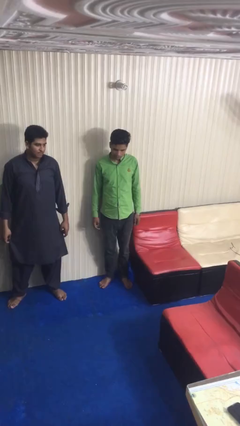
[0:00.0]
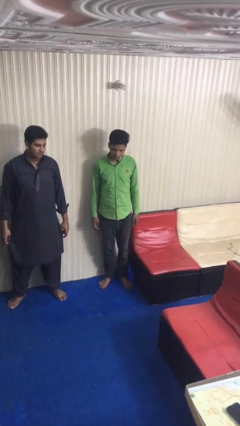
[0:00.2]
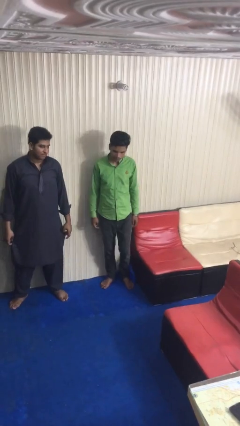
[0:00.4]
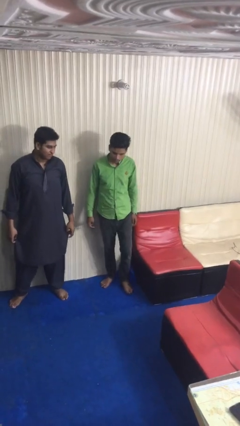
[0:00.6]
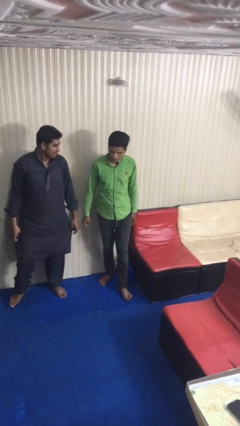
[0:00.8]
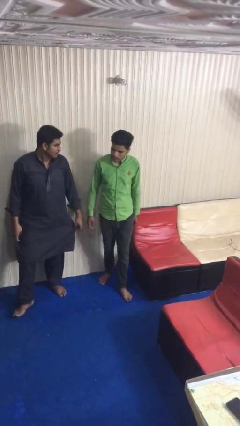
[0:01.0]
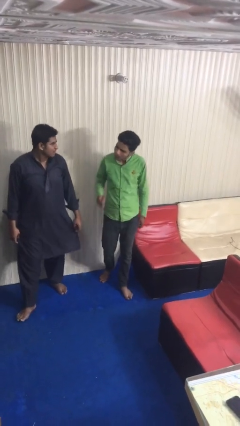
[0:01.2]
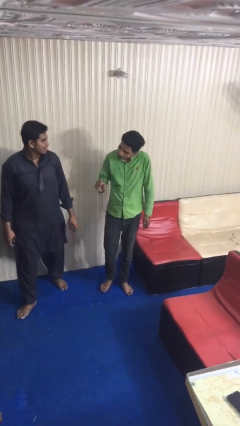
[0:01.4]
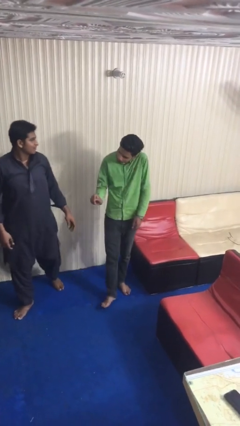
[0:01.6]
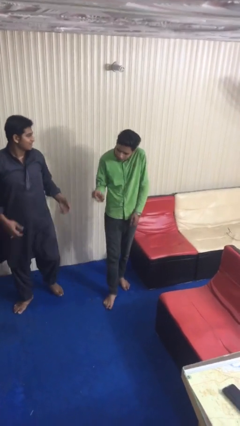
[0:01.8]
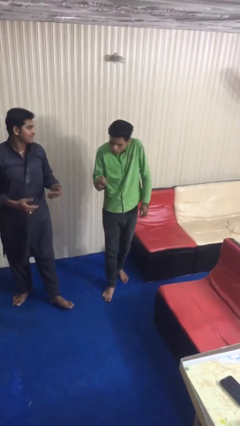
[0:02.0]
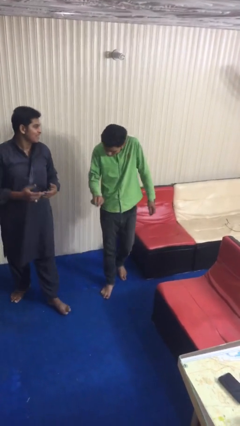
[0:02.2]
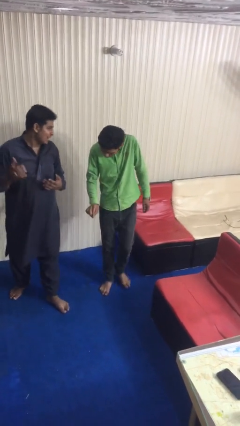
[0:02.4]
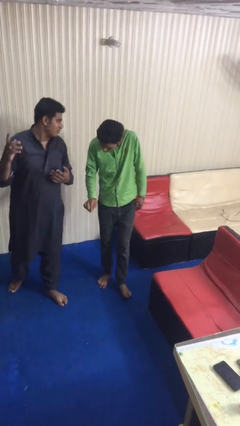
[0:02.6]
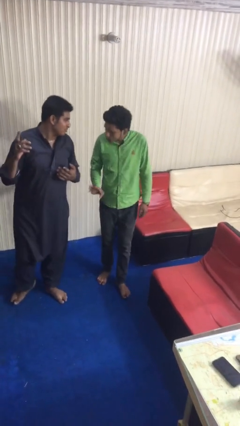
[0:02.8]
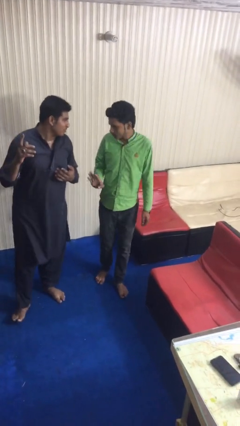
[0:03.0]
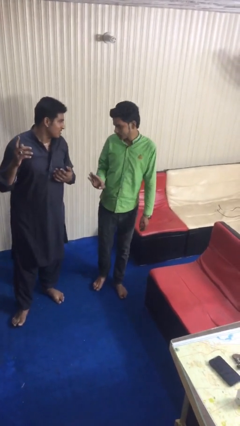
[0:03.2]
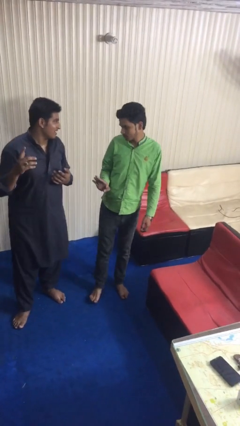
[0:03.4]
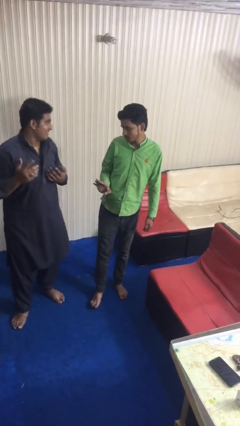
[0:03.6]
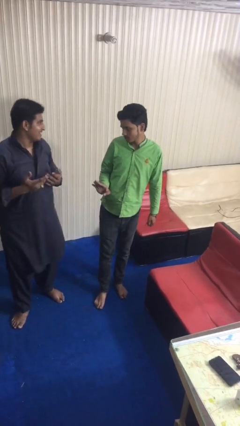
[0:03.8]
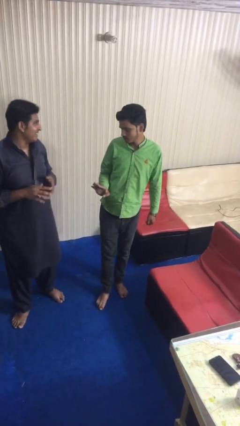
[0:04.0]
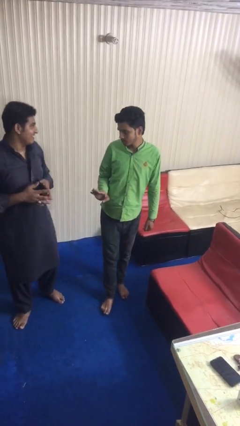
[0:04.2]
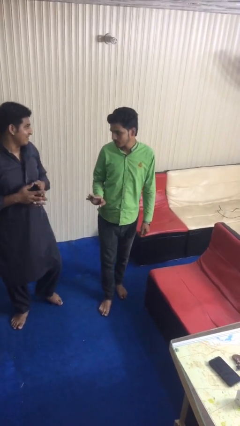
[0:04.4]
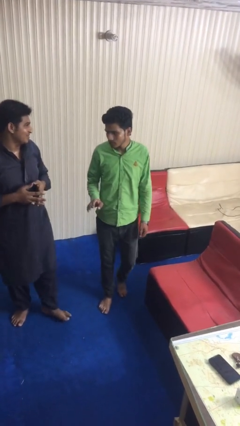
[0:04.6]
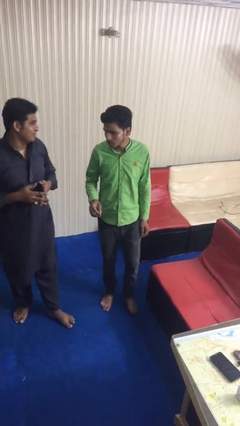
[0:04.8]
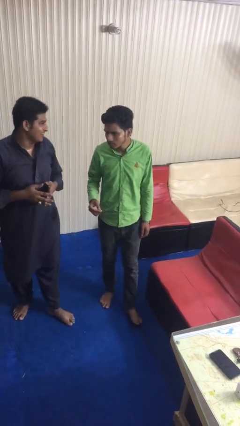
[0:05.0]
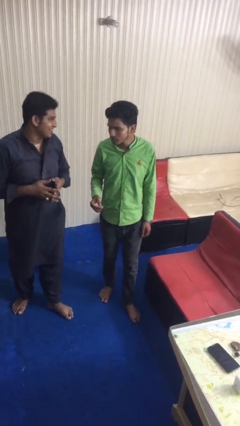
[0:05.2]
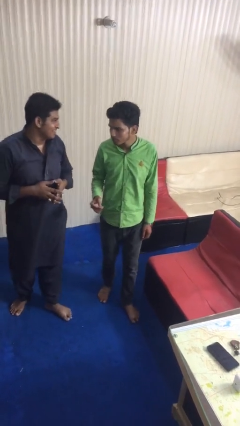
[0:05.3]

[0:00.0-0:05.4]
person talks to person

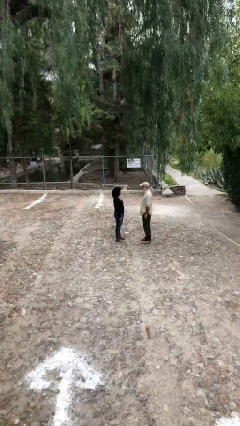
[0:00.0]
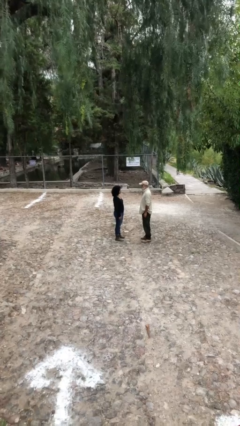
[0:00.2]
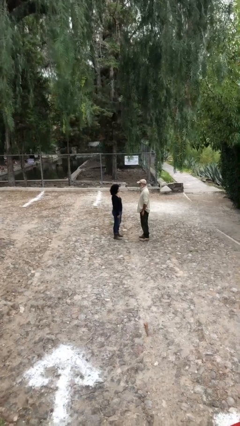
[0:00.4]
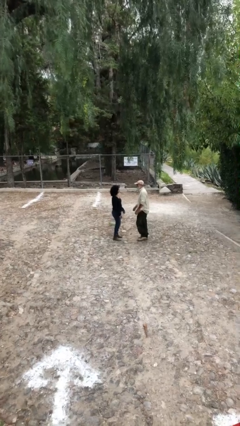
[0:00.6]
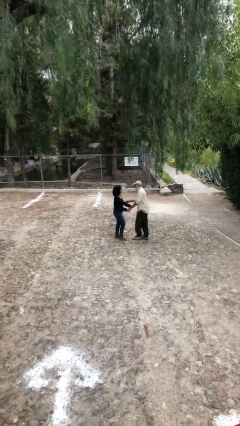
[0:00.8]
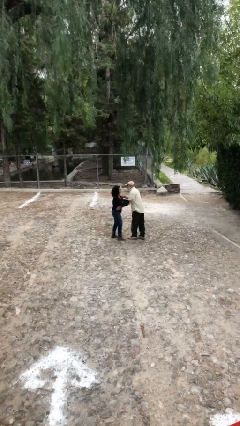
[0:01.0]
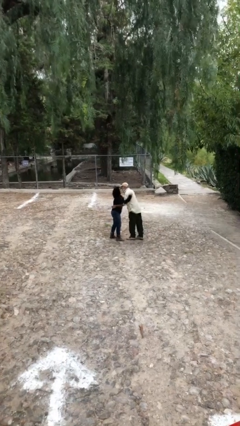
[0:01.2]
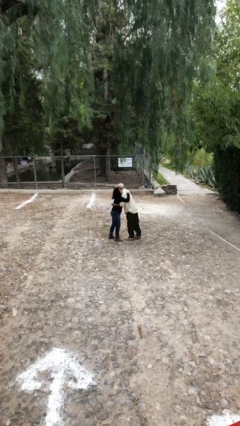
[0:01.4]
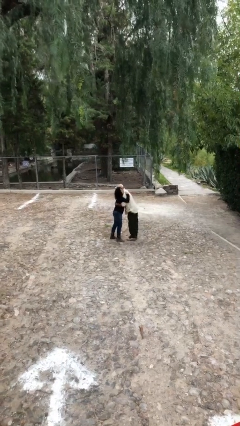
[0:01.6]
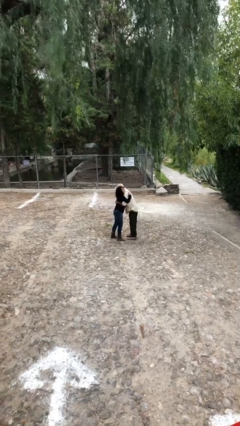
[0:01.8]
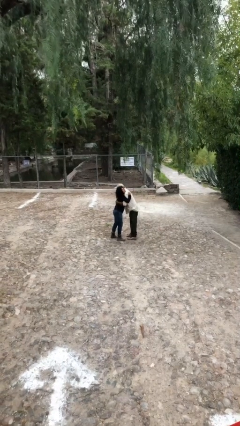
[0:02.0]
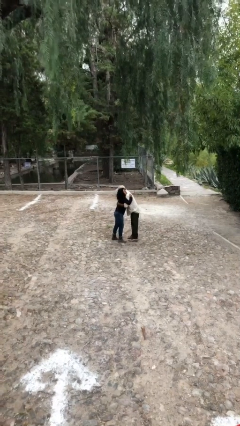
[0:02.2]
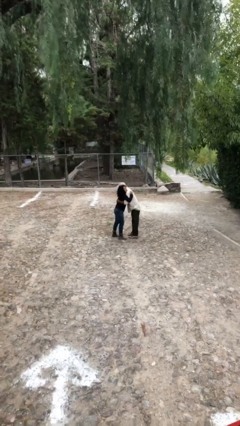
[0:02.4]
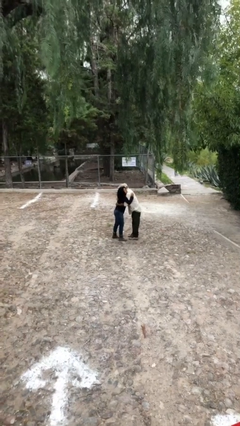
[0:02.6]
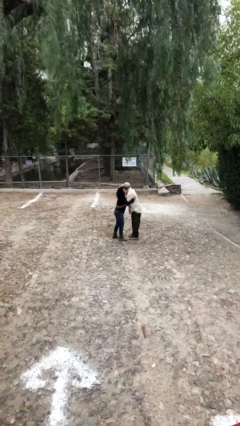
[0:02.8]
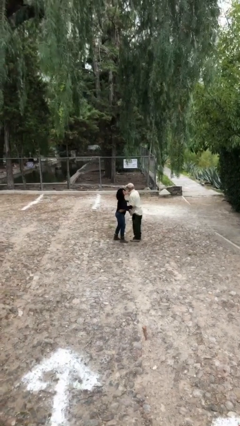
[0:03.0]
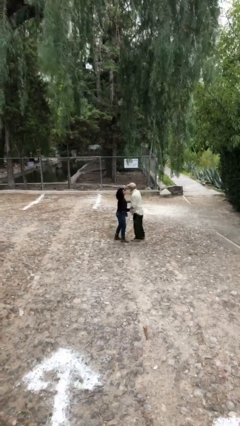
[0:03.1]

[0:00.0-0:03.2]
person embraces person

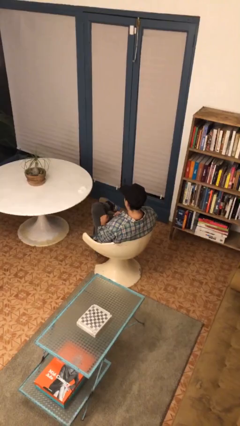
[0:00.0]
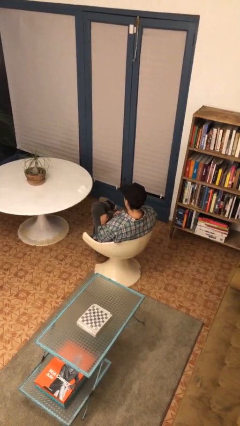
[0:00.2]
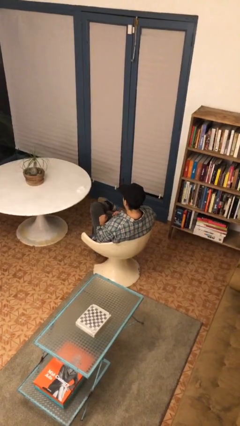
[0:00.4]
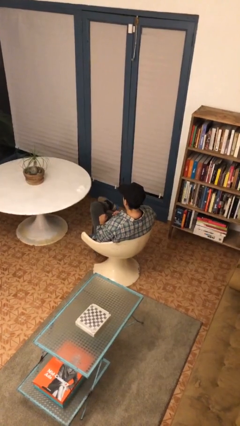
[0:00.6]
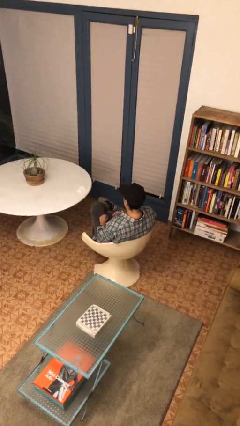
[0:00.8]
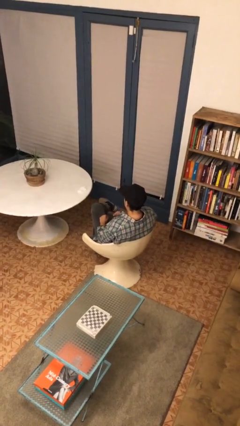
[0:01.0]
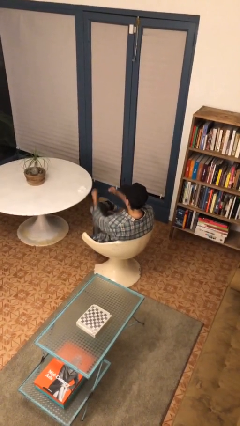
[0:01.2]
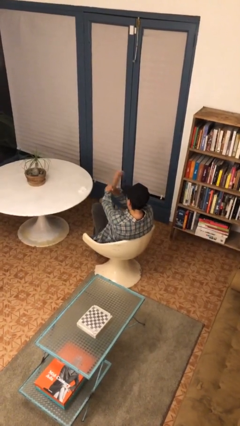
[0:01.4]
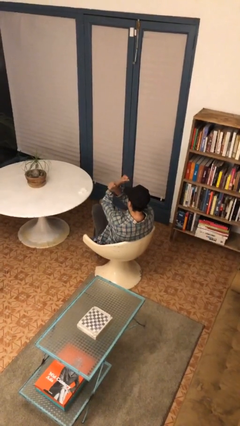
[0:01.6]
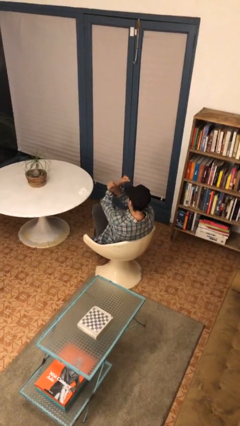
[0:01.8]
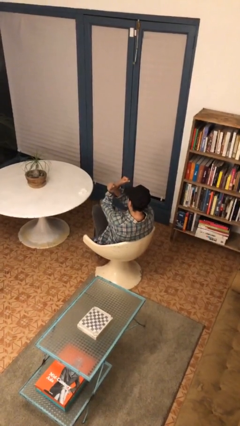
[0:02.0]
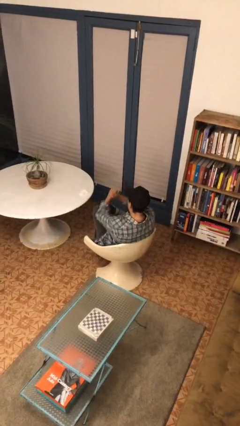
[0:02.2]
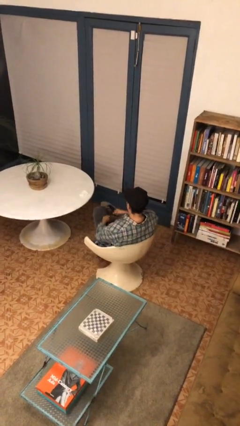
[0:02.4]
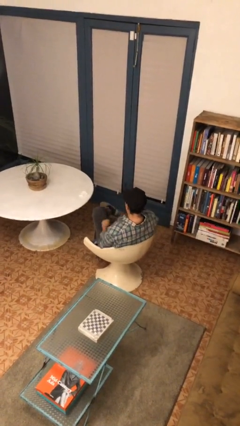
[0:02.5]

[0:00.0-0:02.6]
person gestures arms x

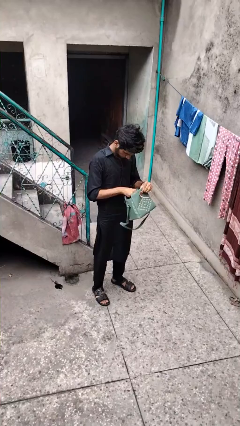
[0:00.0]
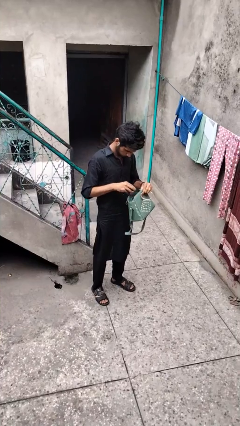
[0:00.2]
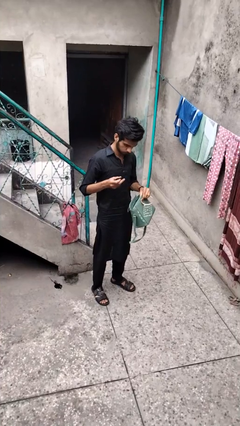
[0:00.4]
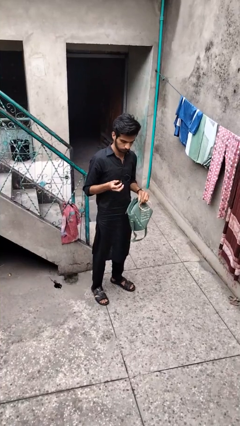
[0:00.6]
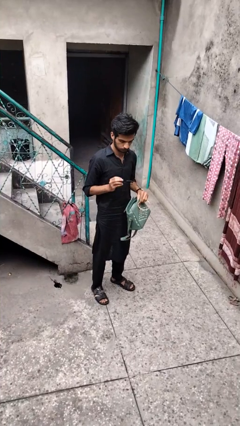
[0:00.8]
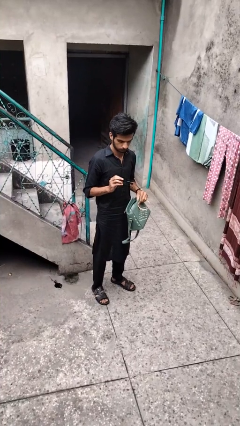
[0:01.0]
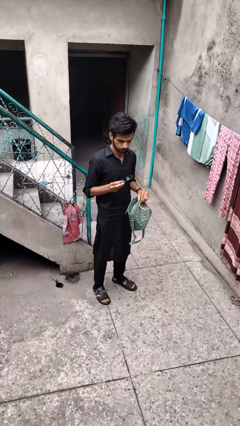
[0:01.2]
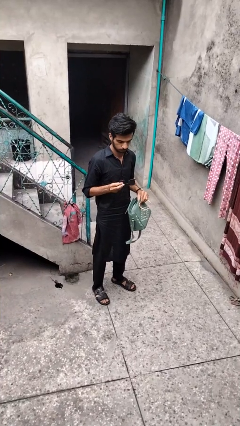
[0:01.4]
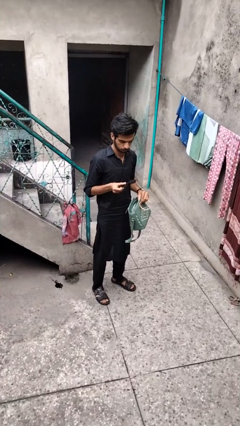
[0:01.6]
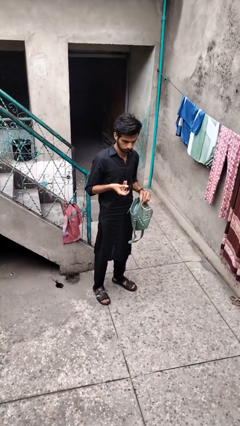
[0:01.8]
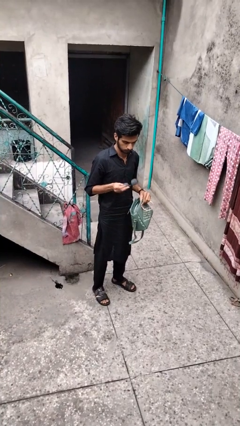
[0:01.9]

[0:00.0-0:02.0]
person takes object from purse

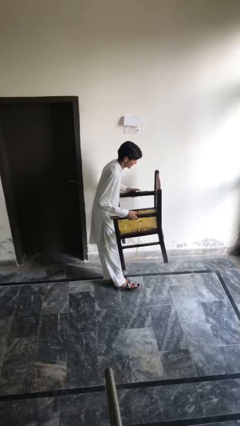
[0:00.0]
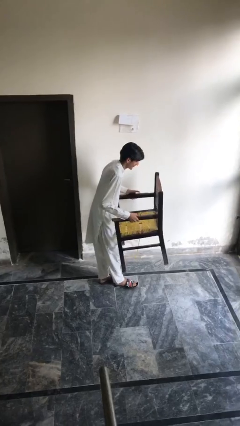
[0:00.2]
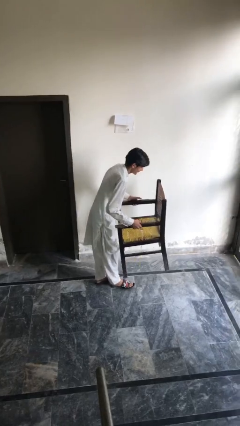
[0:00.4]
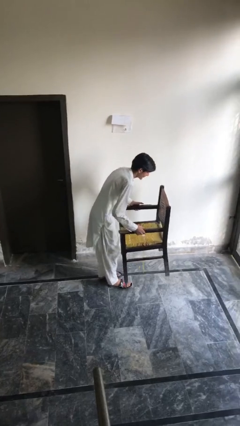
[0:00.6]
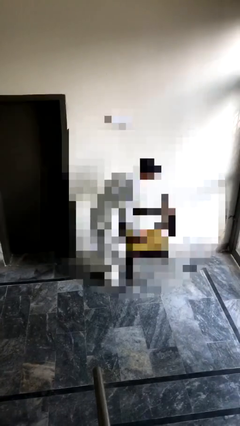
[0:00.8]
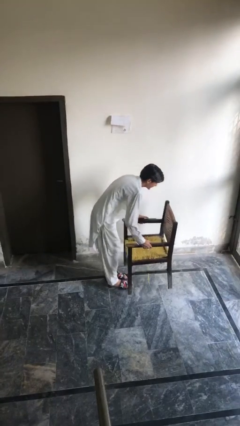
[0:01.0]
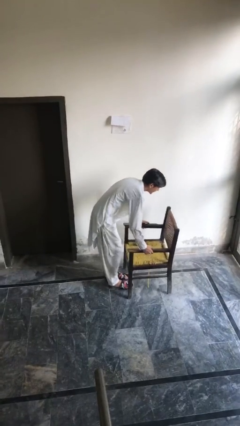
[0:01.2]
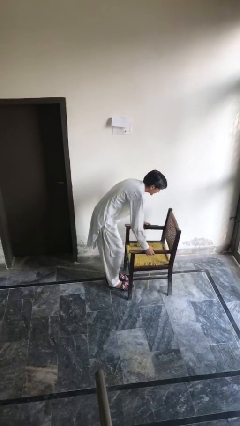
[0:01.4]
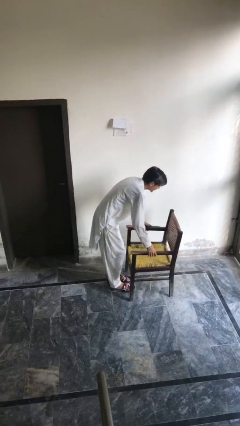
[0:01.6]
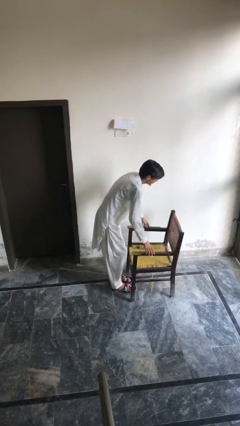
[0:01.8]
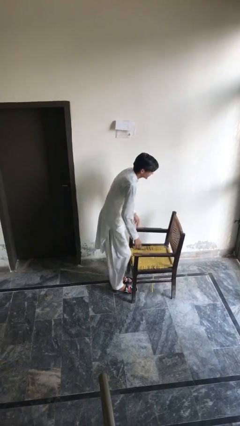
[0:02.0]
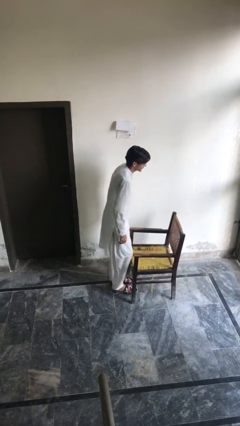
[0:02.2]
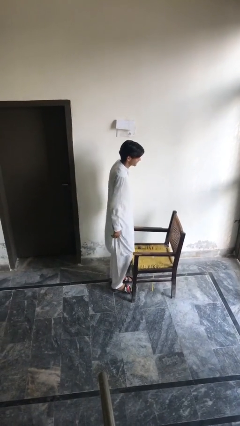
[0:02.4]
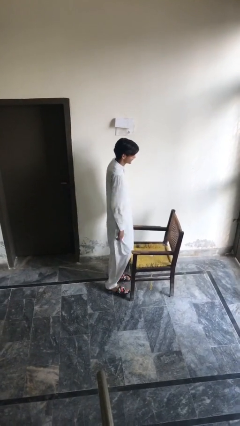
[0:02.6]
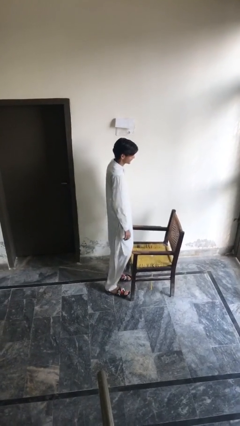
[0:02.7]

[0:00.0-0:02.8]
person puts down object on floor

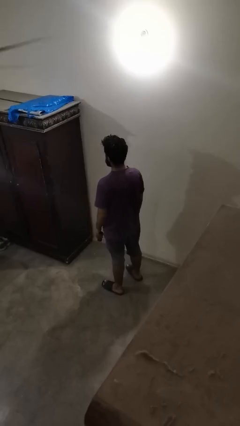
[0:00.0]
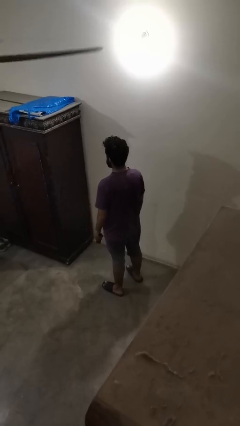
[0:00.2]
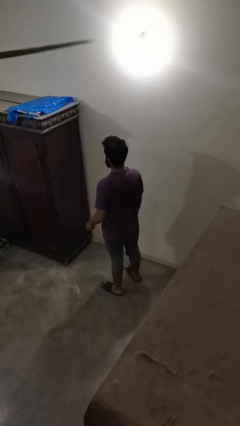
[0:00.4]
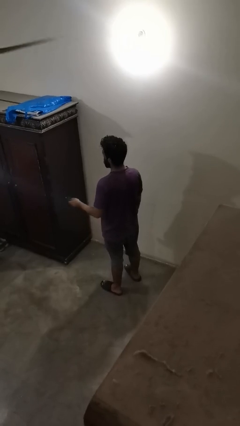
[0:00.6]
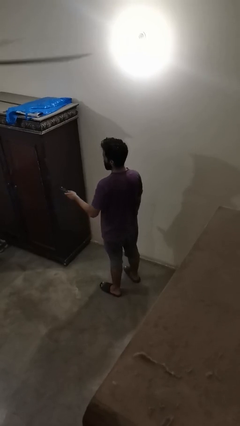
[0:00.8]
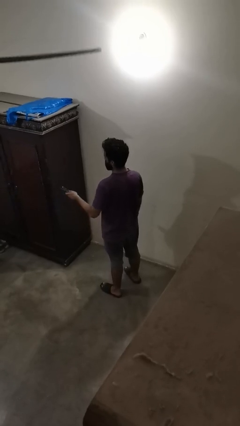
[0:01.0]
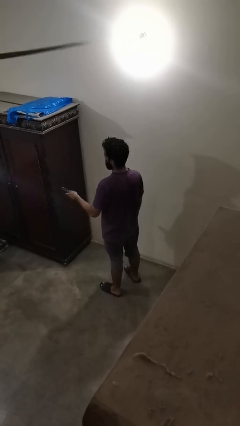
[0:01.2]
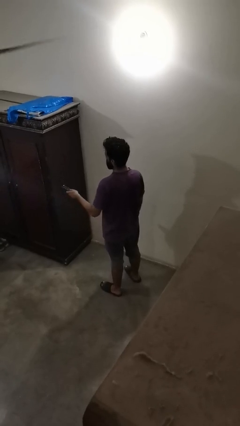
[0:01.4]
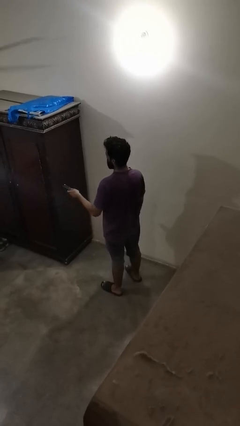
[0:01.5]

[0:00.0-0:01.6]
person uses television remote
